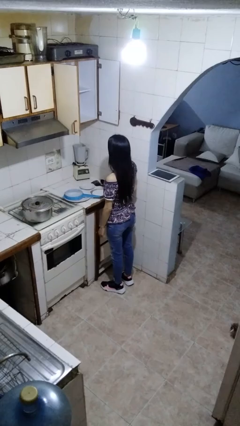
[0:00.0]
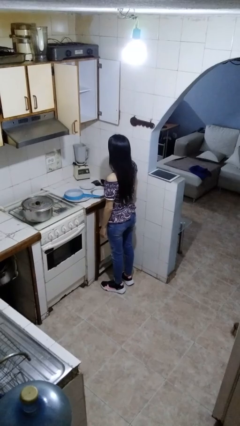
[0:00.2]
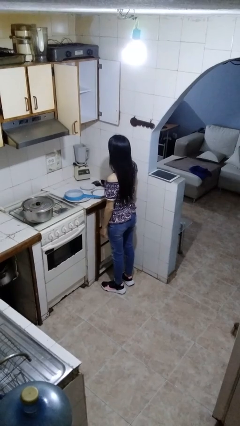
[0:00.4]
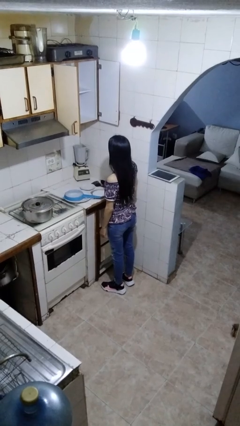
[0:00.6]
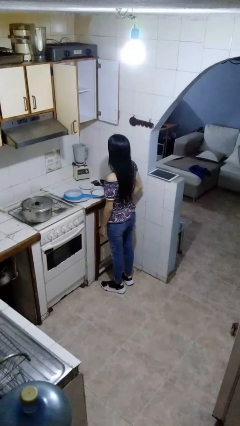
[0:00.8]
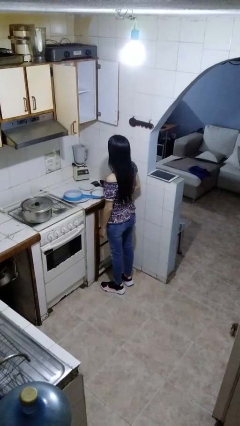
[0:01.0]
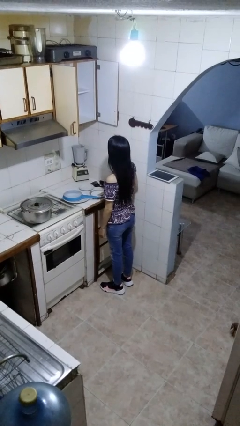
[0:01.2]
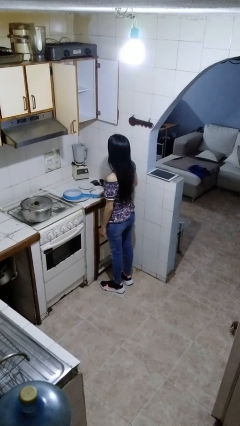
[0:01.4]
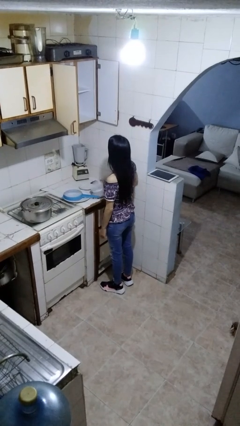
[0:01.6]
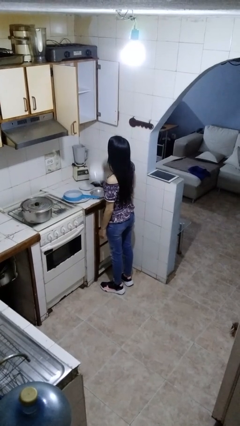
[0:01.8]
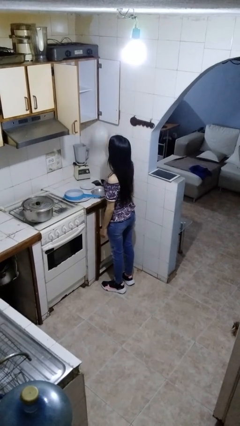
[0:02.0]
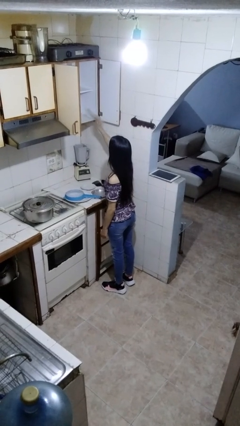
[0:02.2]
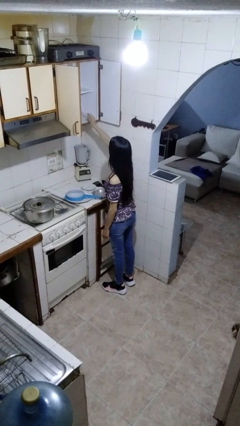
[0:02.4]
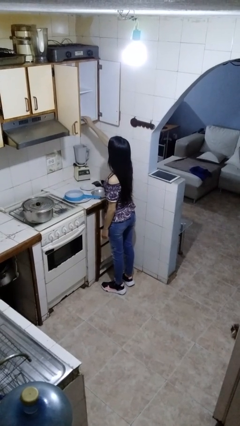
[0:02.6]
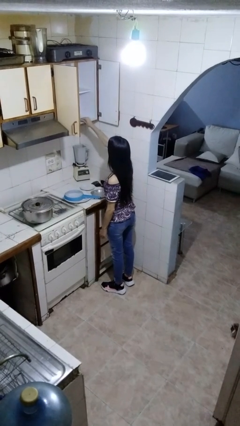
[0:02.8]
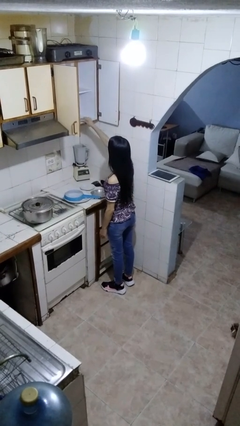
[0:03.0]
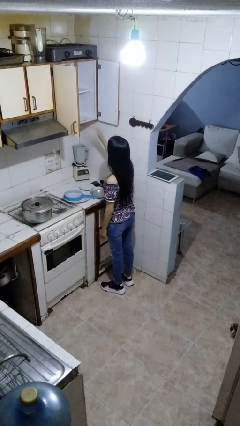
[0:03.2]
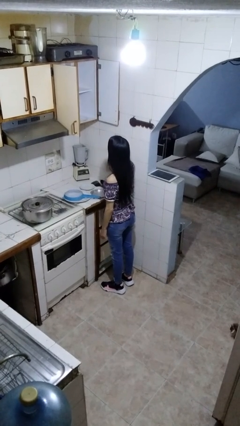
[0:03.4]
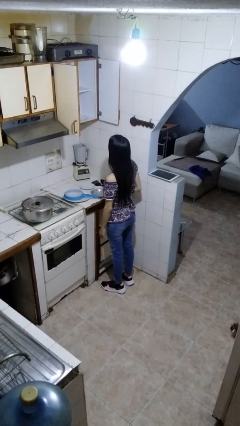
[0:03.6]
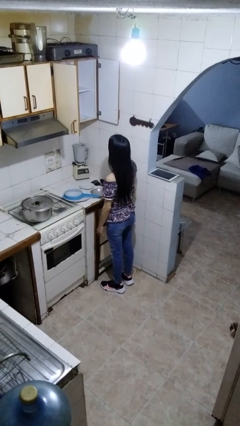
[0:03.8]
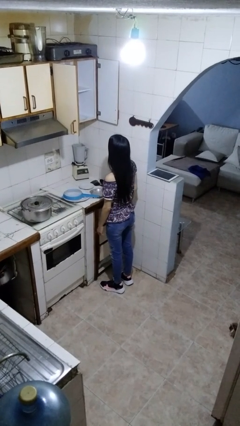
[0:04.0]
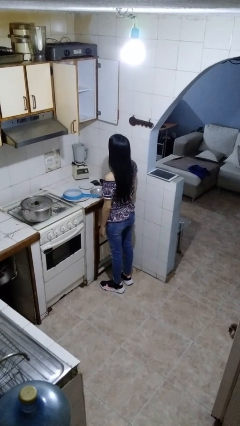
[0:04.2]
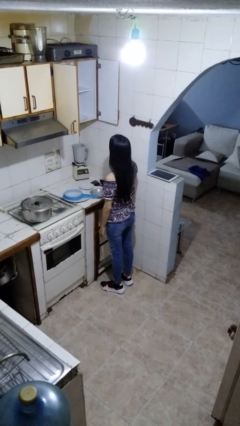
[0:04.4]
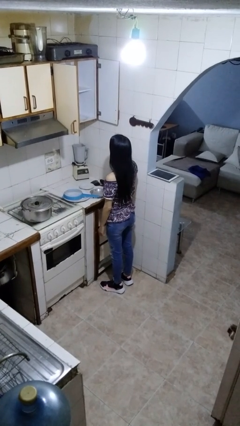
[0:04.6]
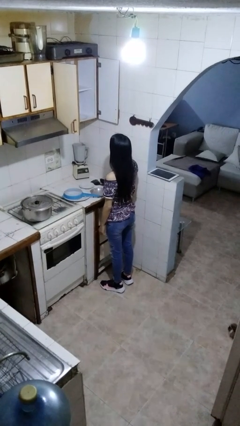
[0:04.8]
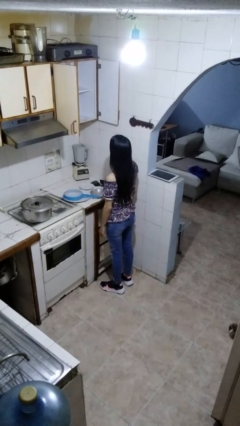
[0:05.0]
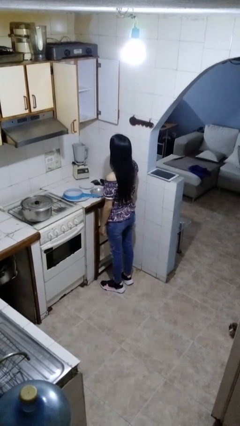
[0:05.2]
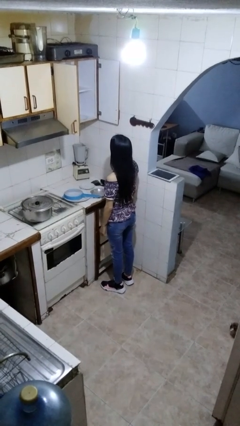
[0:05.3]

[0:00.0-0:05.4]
person puts object in cabinet

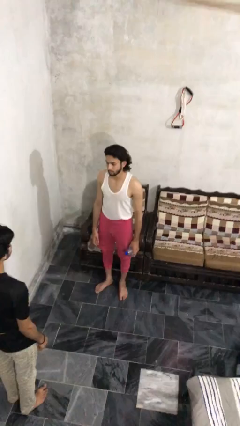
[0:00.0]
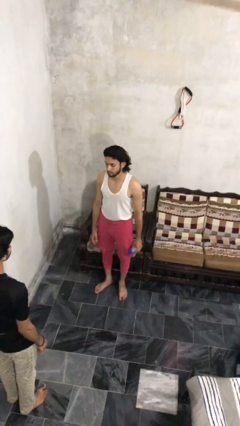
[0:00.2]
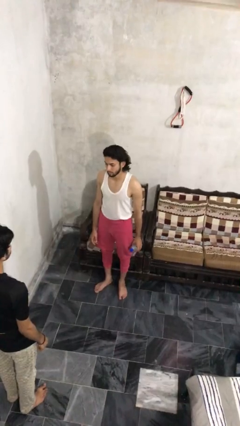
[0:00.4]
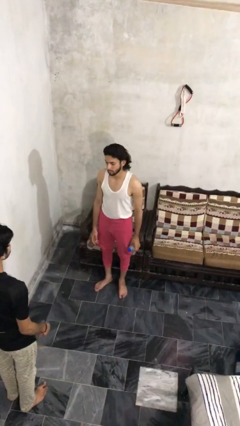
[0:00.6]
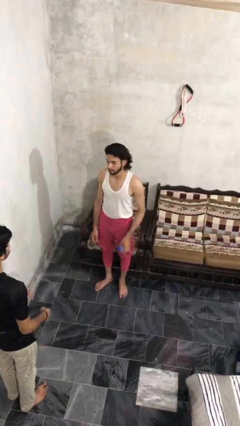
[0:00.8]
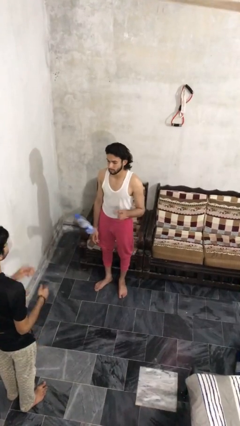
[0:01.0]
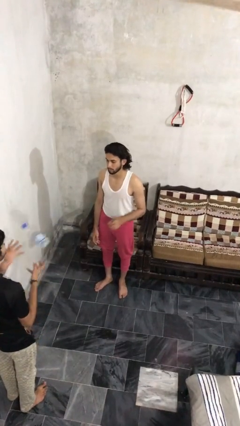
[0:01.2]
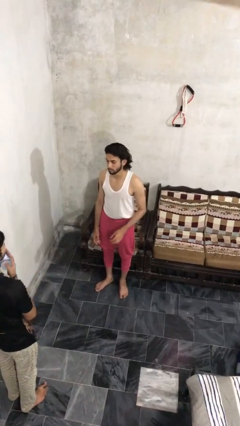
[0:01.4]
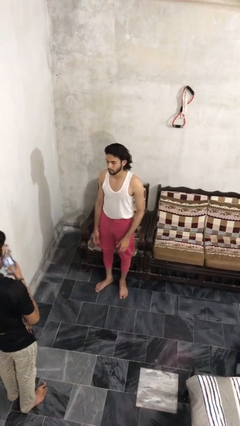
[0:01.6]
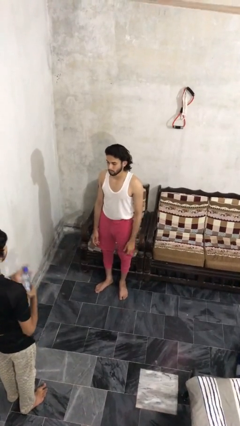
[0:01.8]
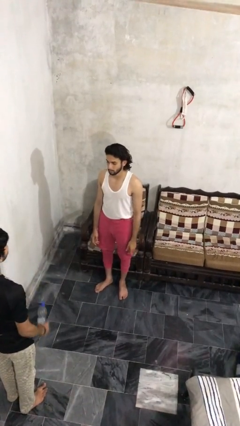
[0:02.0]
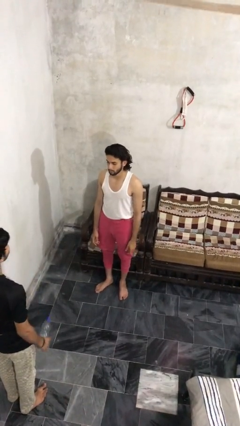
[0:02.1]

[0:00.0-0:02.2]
person throws object to person

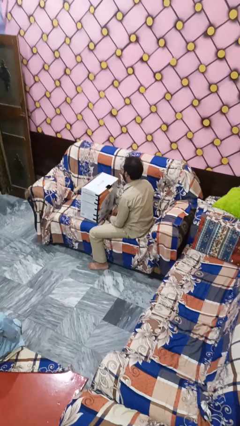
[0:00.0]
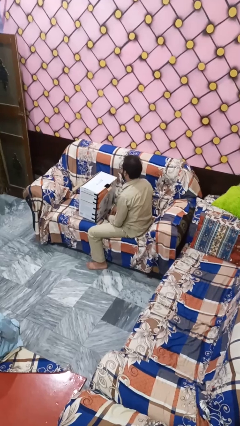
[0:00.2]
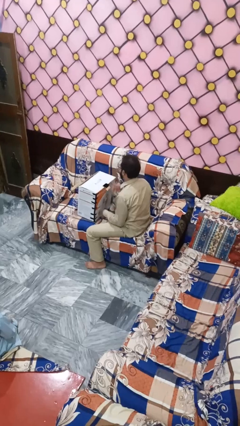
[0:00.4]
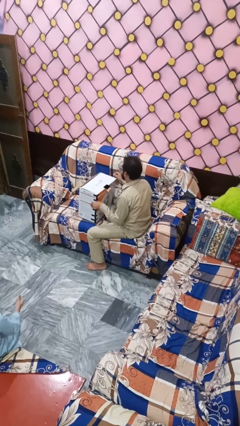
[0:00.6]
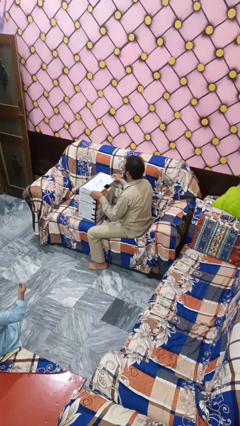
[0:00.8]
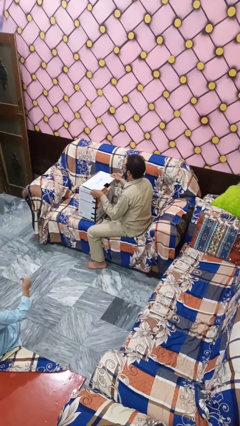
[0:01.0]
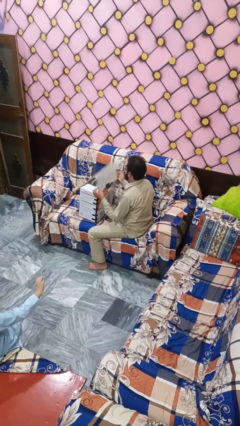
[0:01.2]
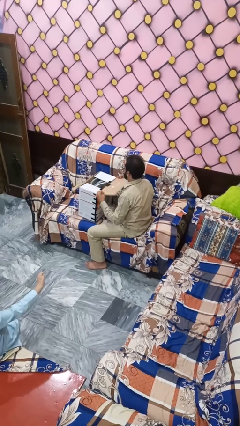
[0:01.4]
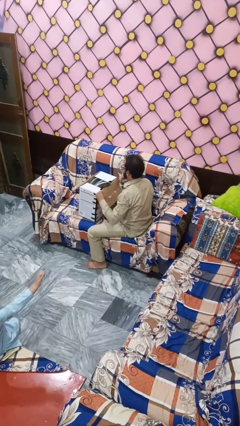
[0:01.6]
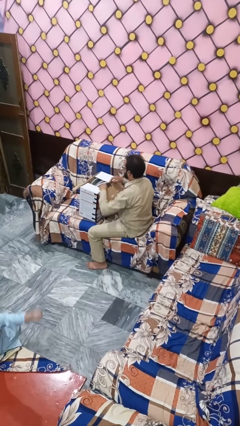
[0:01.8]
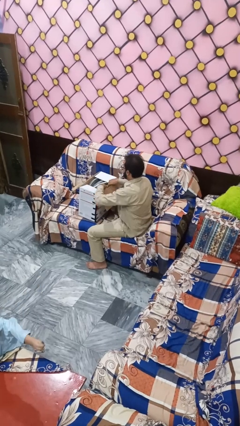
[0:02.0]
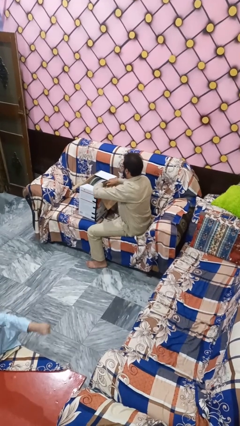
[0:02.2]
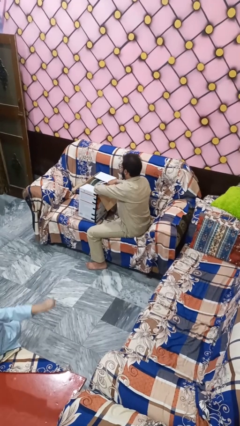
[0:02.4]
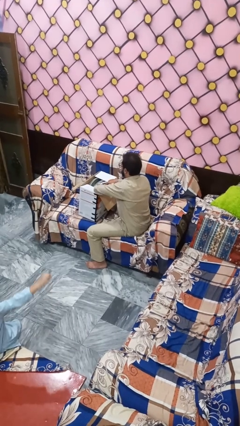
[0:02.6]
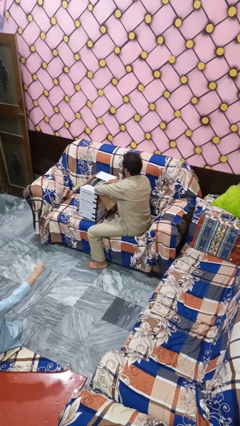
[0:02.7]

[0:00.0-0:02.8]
person searches in box

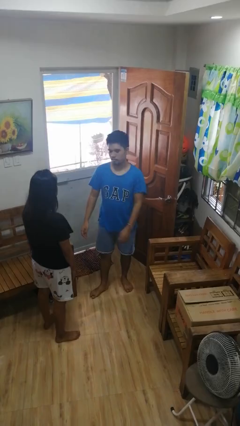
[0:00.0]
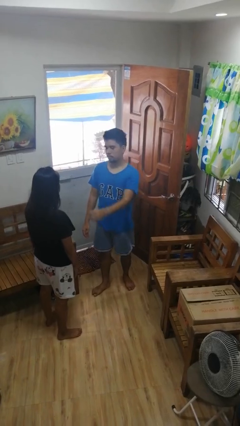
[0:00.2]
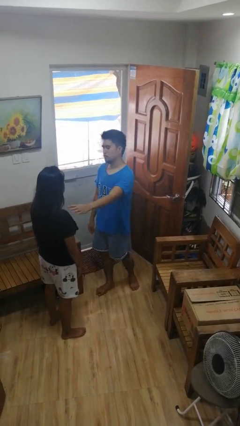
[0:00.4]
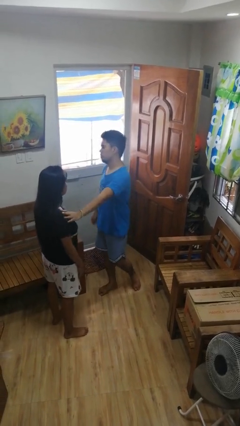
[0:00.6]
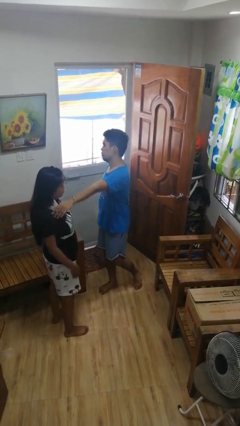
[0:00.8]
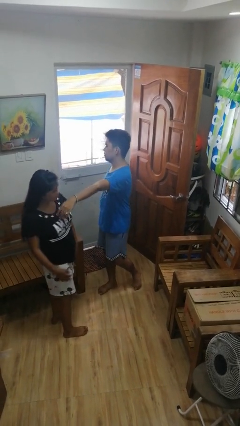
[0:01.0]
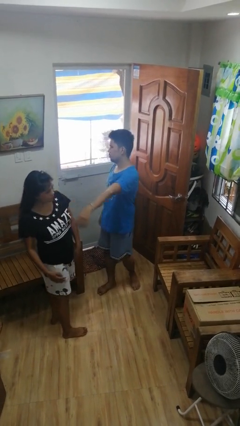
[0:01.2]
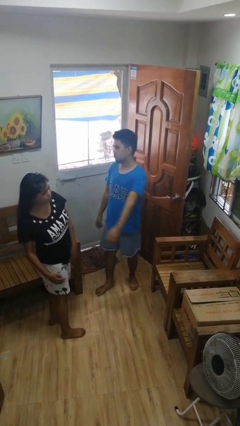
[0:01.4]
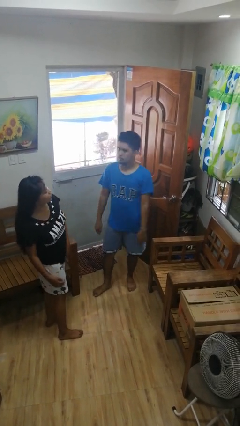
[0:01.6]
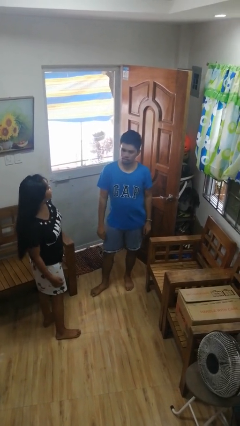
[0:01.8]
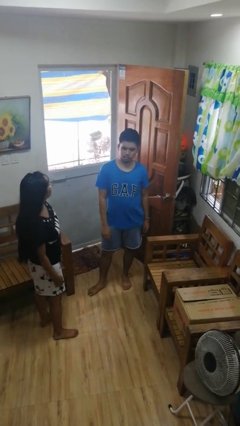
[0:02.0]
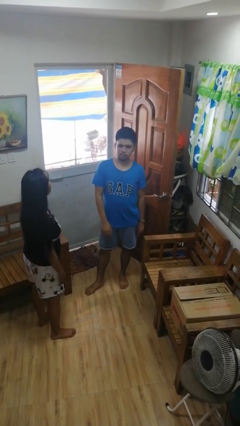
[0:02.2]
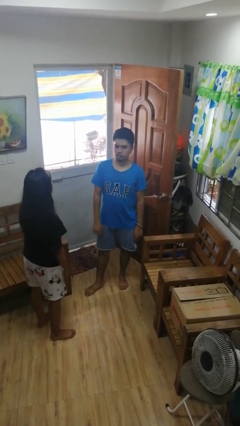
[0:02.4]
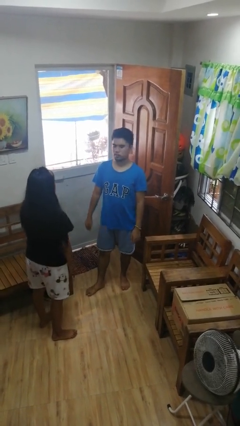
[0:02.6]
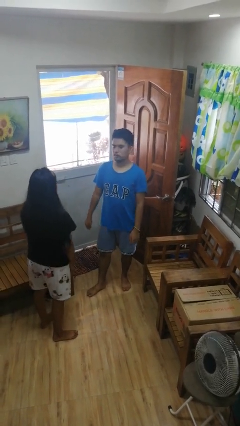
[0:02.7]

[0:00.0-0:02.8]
person shoves person

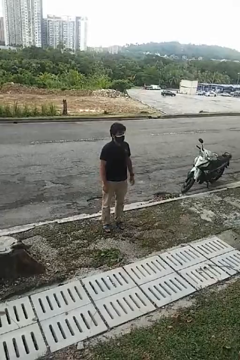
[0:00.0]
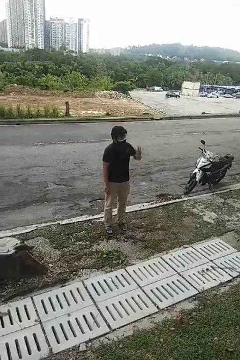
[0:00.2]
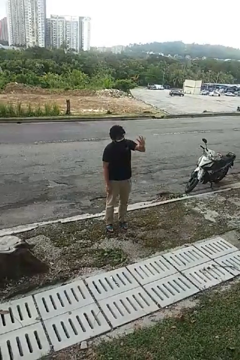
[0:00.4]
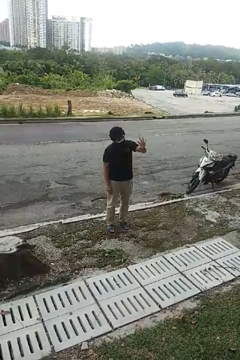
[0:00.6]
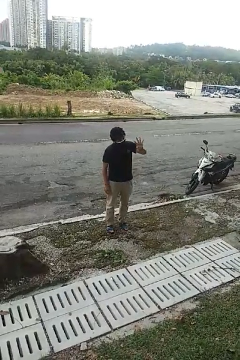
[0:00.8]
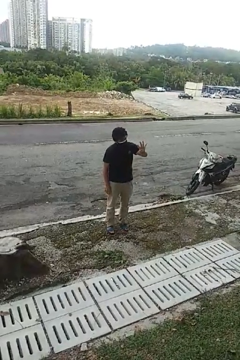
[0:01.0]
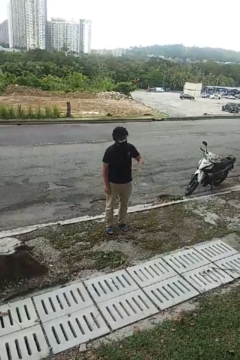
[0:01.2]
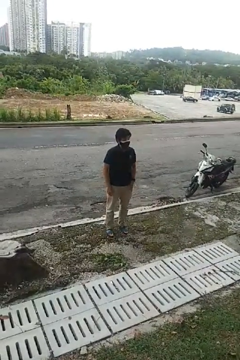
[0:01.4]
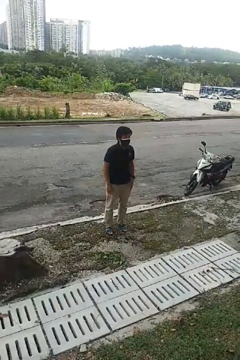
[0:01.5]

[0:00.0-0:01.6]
person gestures number four

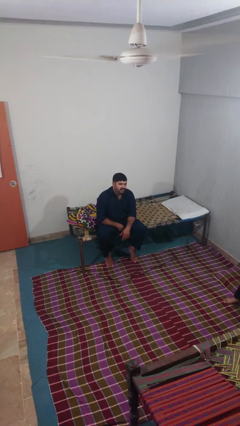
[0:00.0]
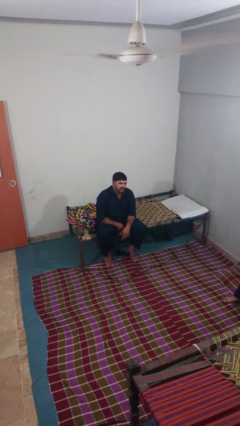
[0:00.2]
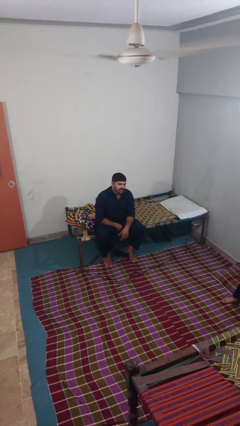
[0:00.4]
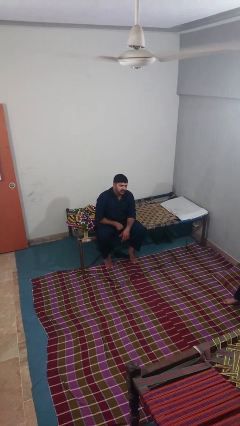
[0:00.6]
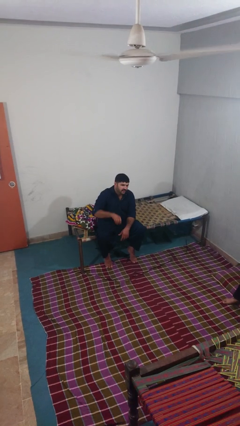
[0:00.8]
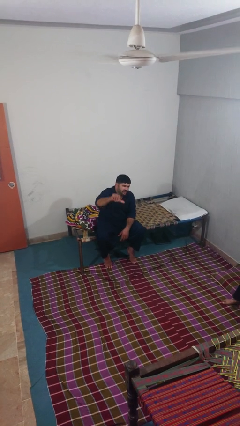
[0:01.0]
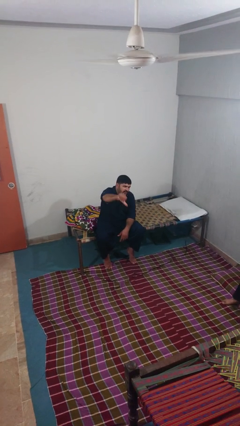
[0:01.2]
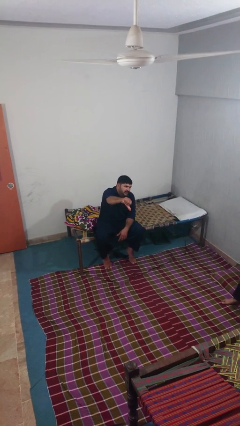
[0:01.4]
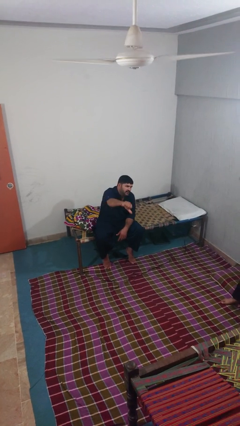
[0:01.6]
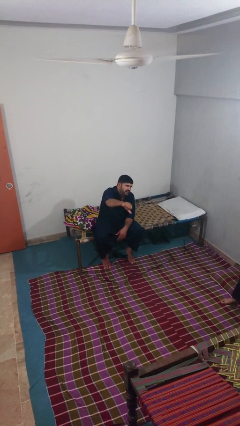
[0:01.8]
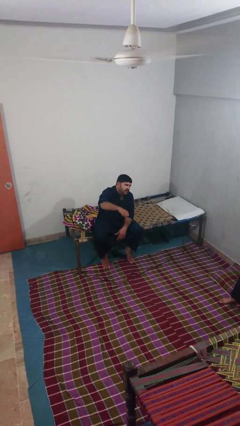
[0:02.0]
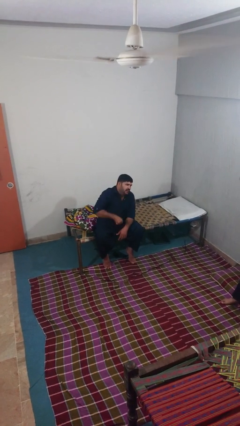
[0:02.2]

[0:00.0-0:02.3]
person gestures thumbs down

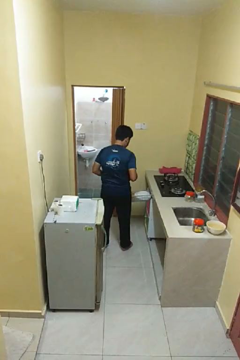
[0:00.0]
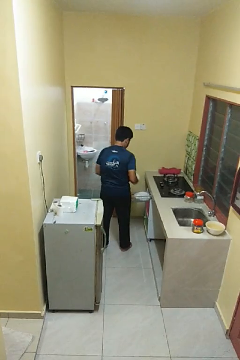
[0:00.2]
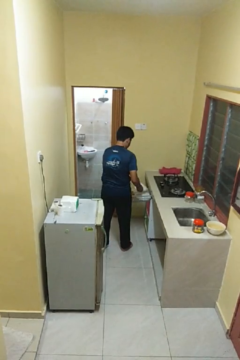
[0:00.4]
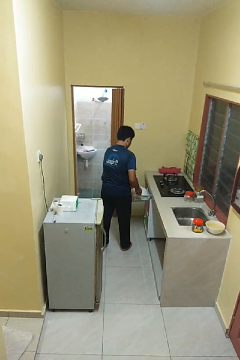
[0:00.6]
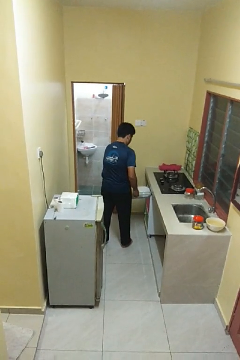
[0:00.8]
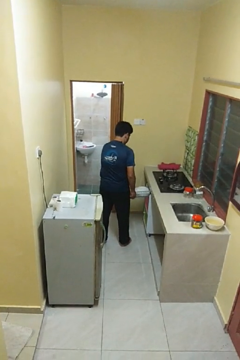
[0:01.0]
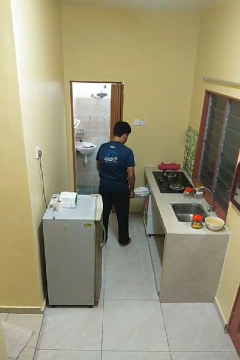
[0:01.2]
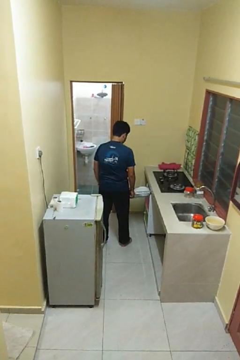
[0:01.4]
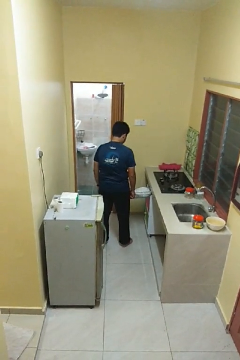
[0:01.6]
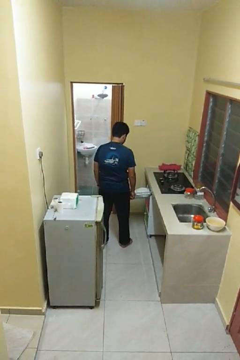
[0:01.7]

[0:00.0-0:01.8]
person puts object into kitchen drawer
